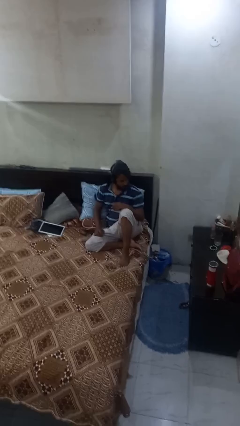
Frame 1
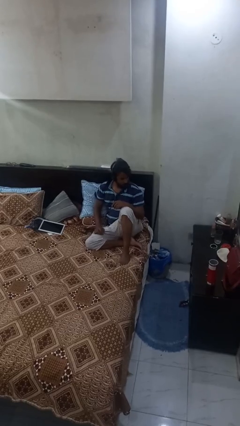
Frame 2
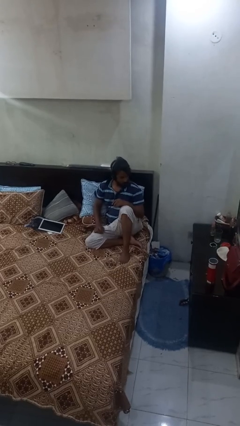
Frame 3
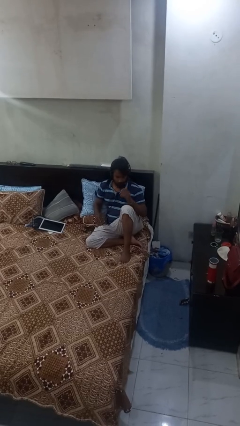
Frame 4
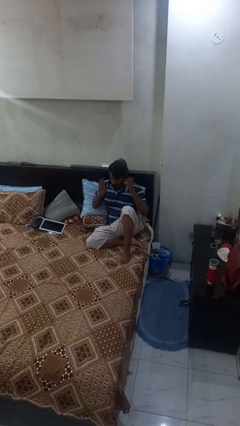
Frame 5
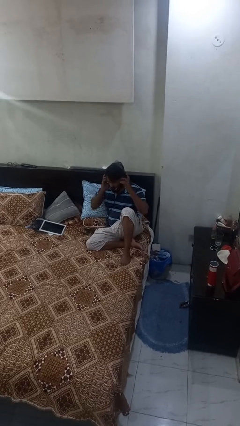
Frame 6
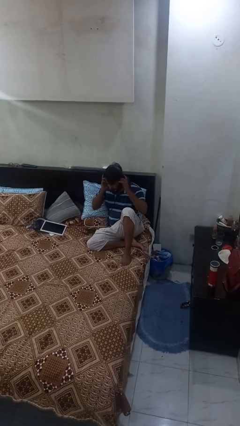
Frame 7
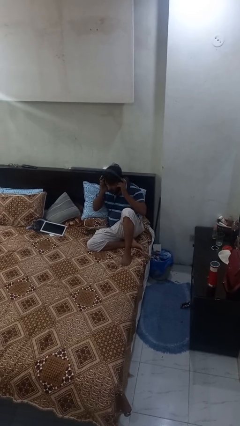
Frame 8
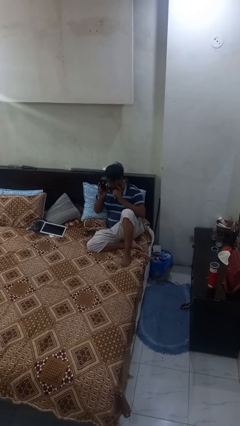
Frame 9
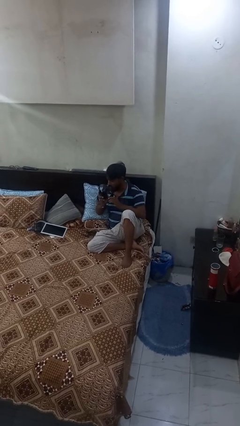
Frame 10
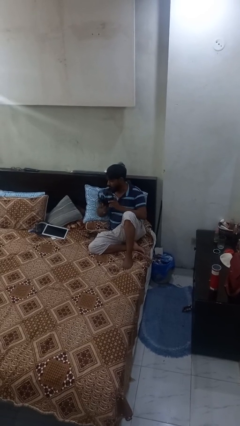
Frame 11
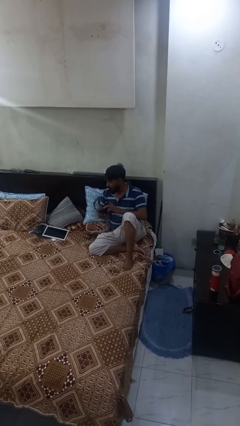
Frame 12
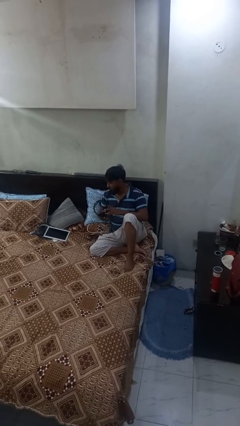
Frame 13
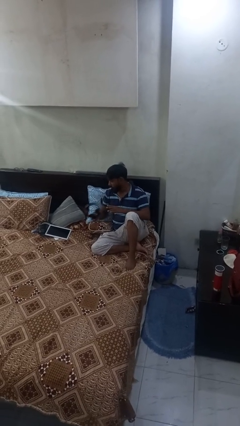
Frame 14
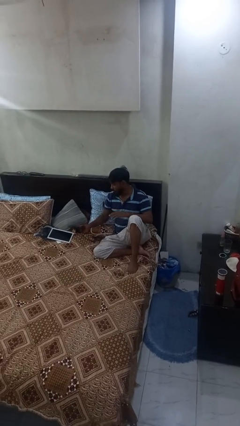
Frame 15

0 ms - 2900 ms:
person takes off headphones

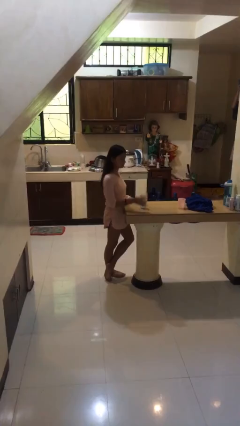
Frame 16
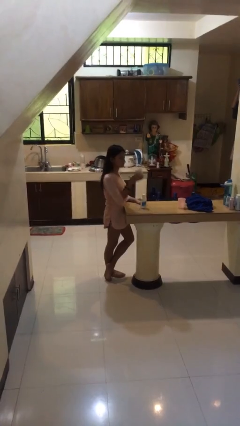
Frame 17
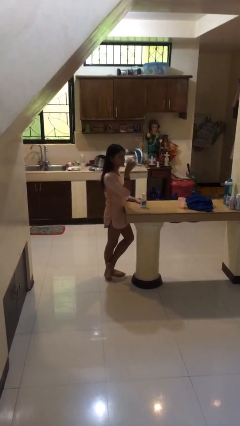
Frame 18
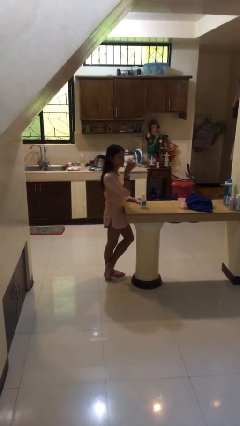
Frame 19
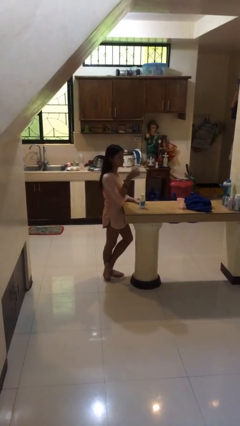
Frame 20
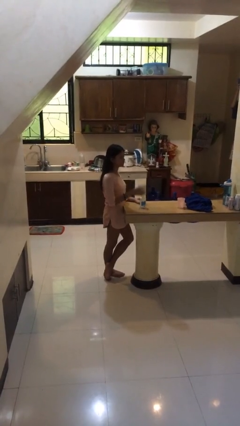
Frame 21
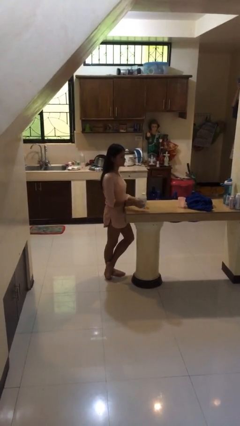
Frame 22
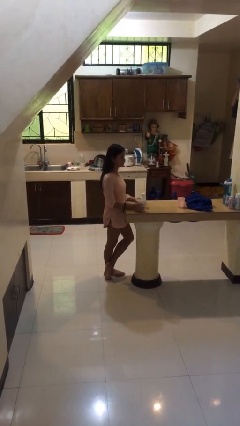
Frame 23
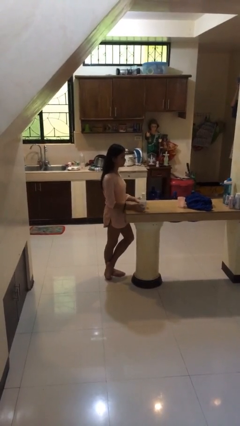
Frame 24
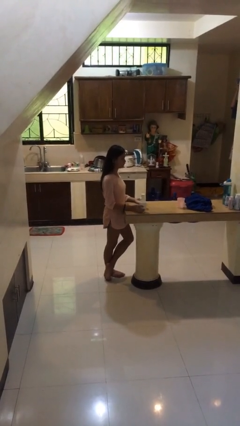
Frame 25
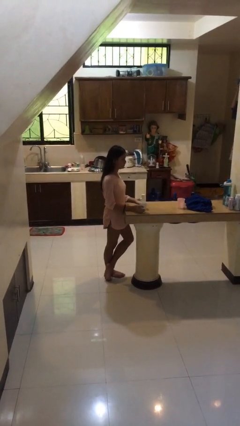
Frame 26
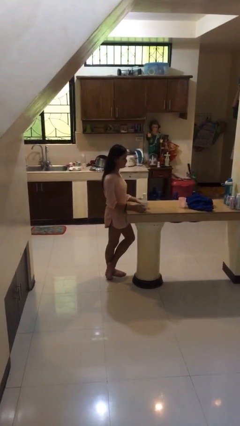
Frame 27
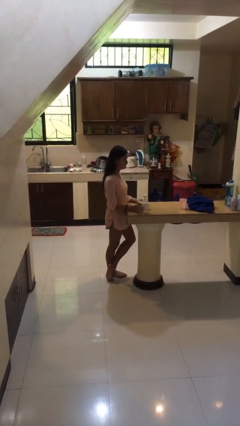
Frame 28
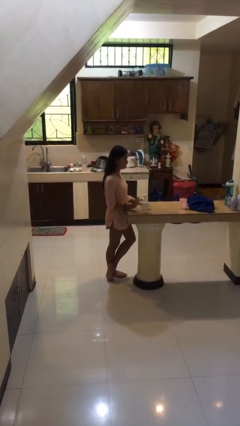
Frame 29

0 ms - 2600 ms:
person drinks from cup

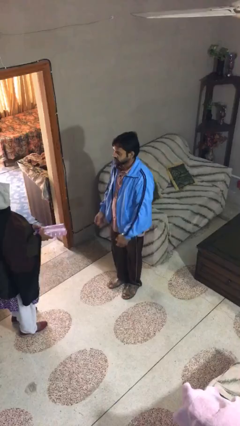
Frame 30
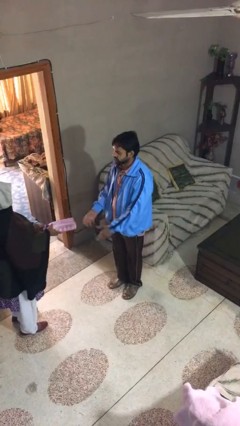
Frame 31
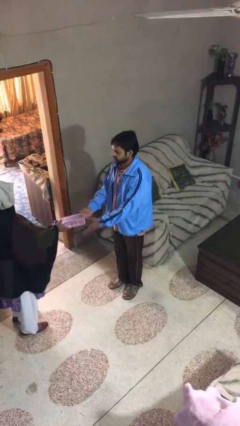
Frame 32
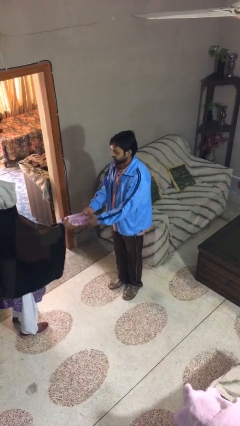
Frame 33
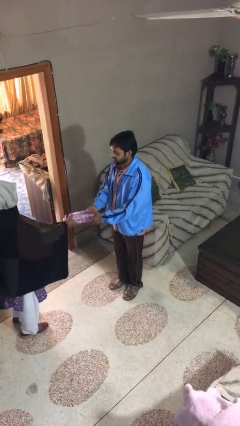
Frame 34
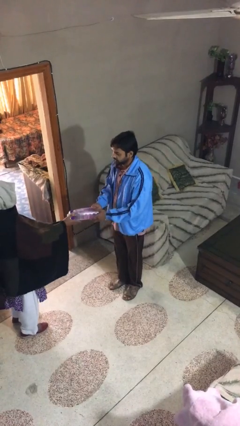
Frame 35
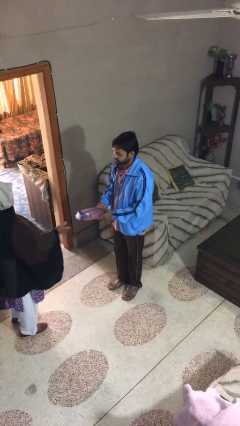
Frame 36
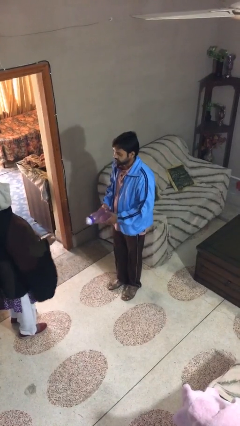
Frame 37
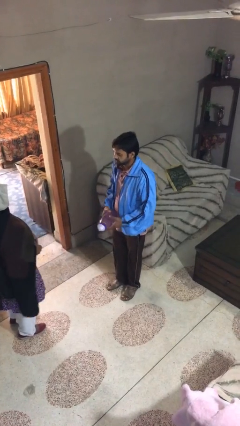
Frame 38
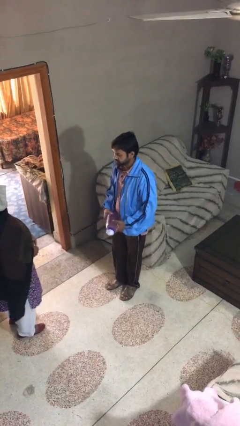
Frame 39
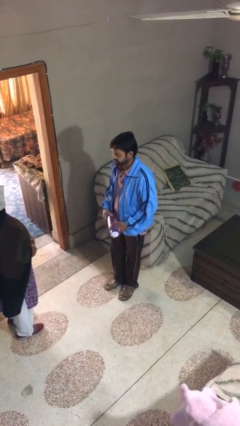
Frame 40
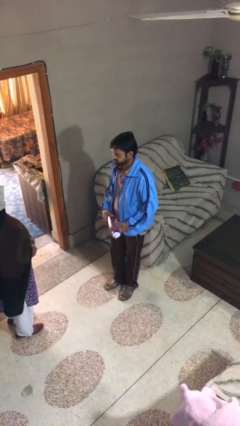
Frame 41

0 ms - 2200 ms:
person transfers object to person

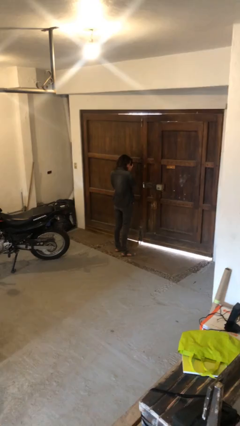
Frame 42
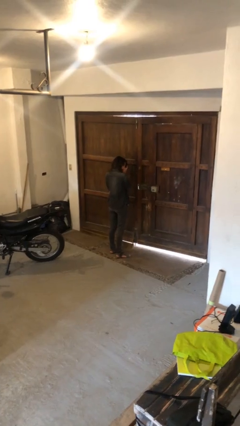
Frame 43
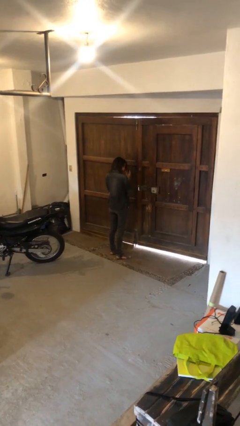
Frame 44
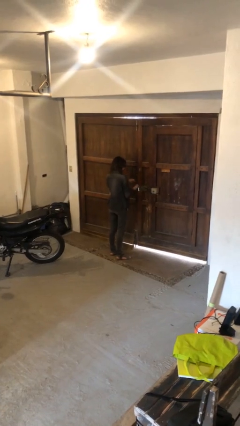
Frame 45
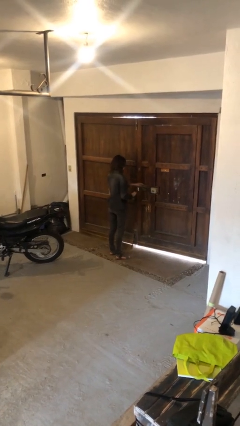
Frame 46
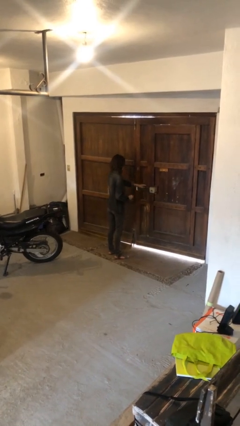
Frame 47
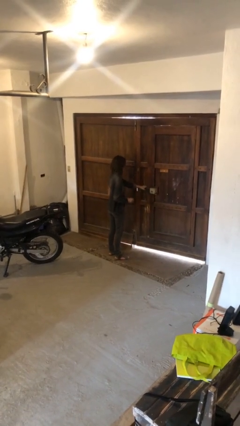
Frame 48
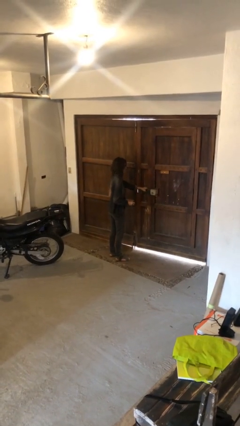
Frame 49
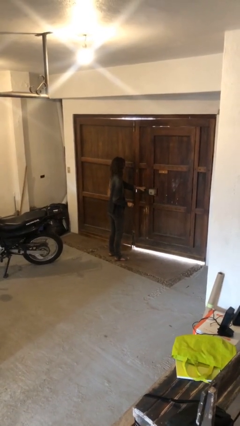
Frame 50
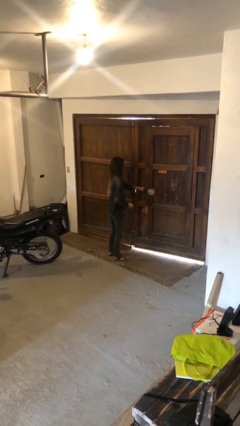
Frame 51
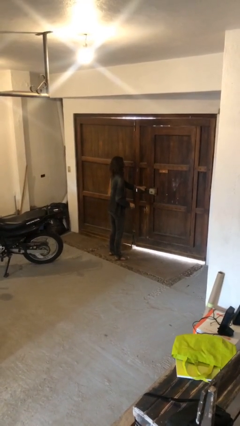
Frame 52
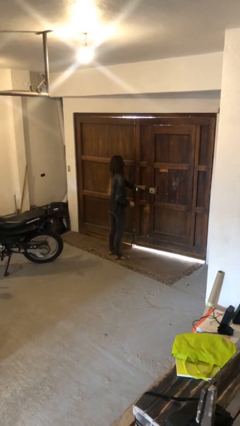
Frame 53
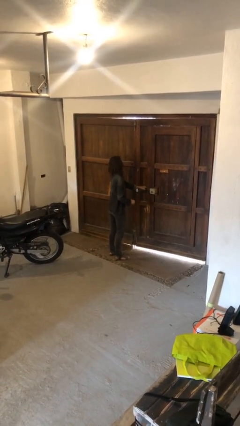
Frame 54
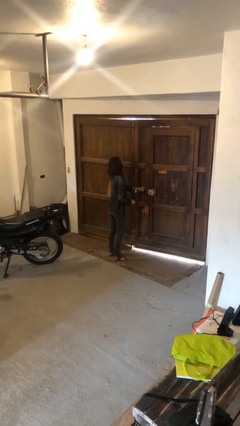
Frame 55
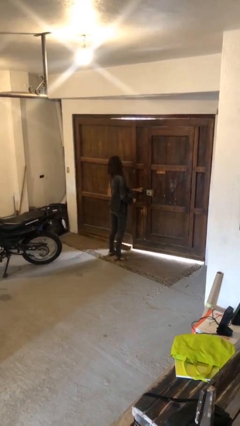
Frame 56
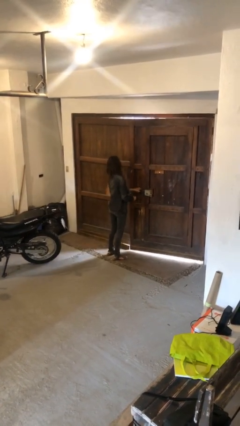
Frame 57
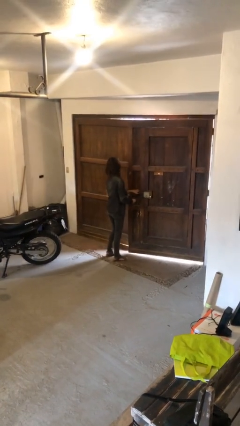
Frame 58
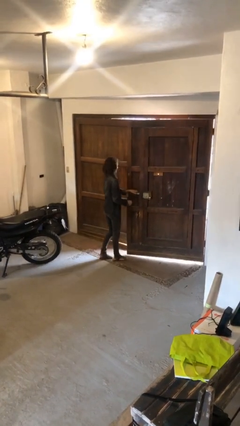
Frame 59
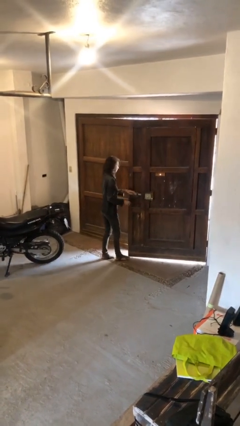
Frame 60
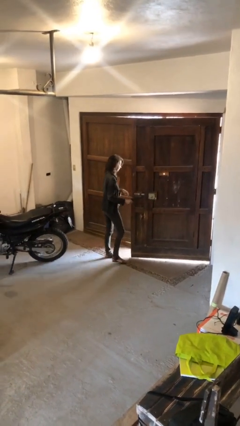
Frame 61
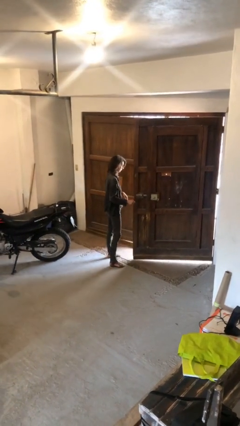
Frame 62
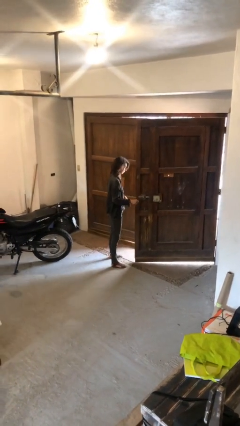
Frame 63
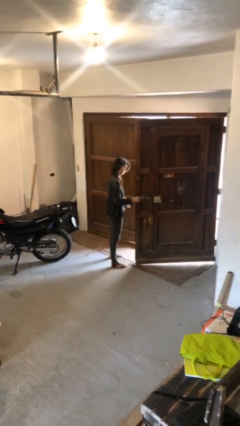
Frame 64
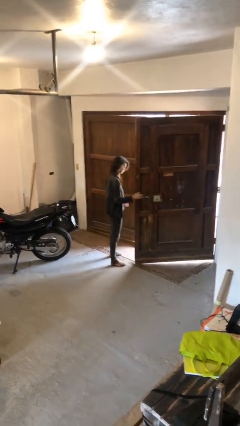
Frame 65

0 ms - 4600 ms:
person opens gate

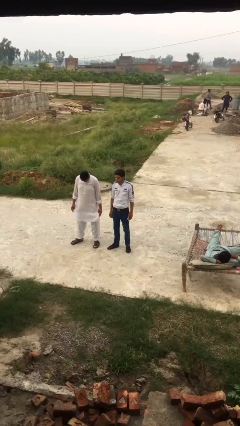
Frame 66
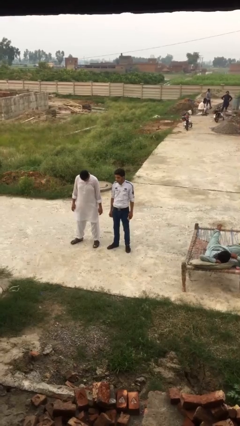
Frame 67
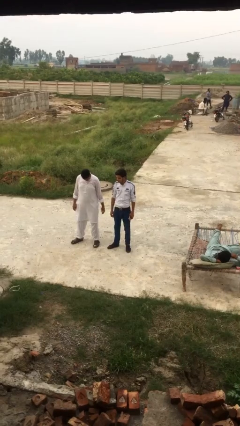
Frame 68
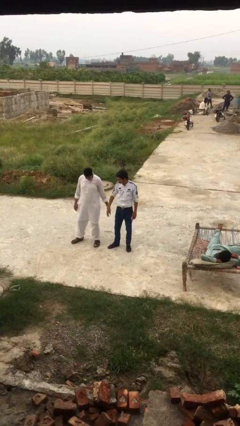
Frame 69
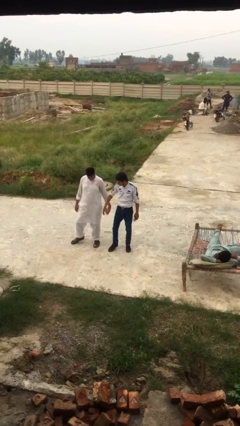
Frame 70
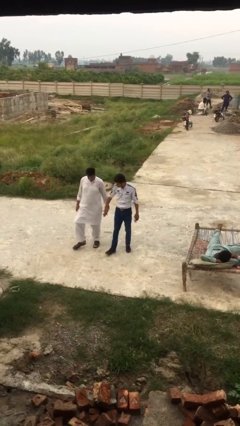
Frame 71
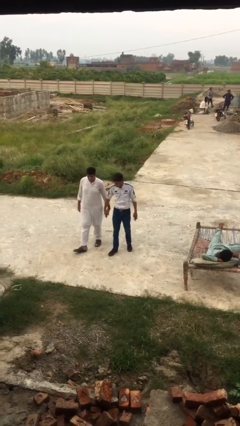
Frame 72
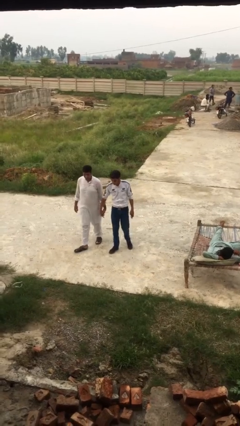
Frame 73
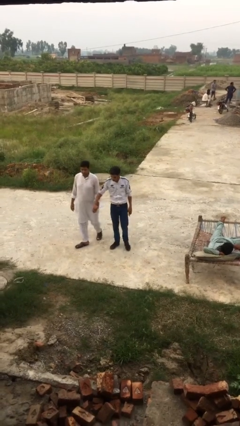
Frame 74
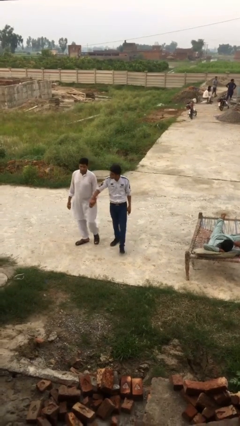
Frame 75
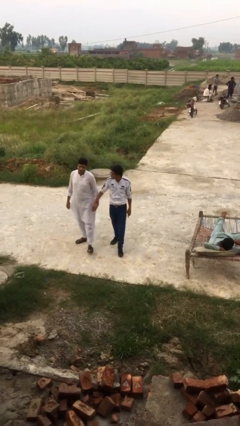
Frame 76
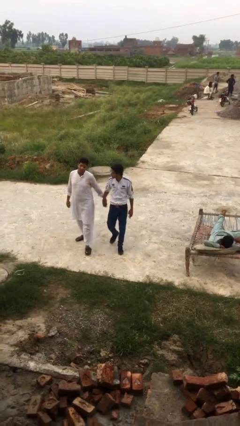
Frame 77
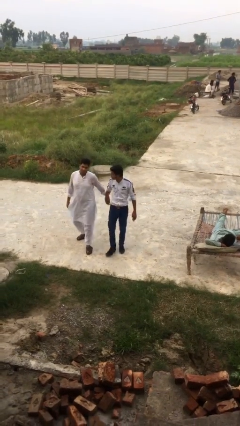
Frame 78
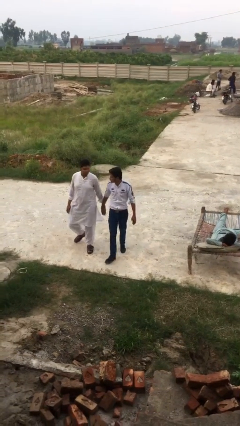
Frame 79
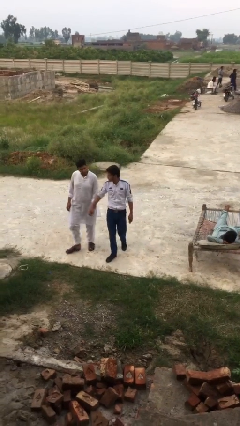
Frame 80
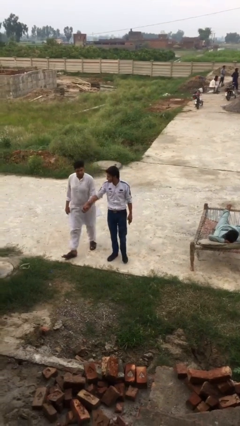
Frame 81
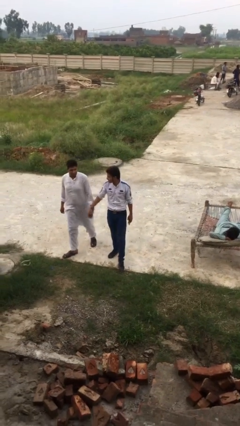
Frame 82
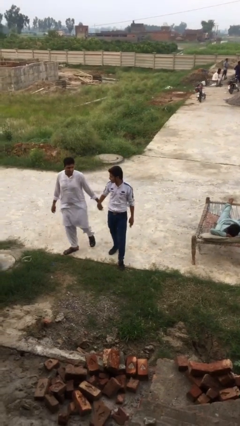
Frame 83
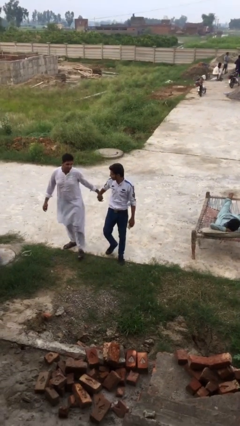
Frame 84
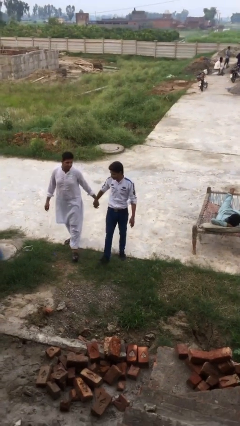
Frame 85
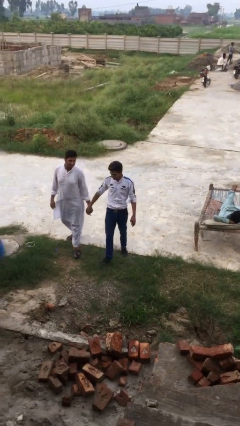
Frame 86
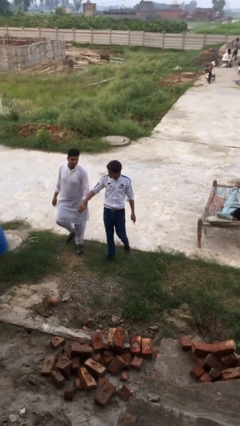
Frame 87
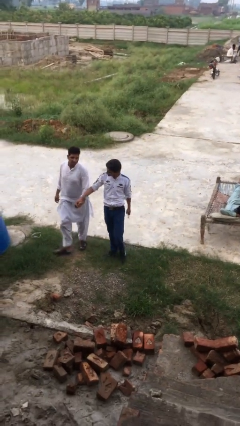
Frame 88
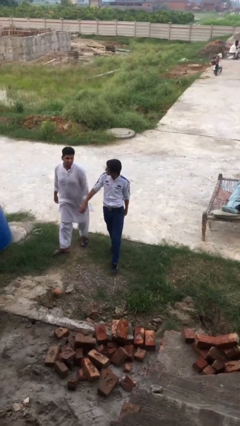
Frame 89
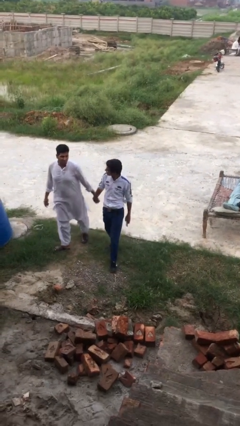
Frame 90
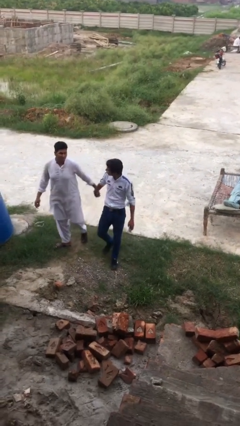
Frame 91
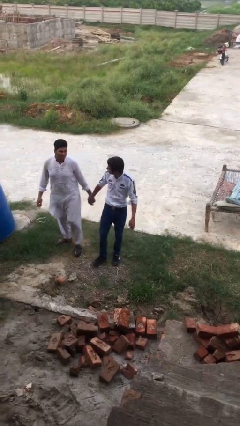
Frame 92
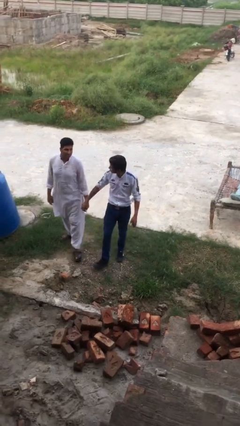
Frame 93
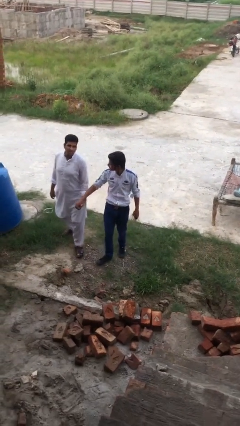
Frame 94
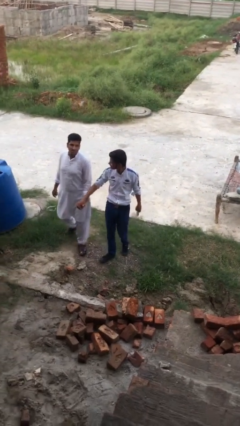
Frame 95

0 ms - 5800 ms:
person holds hand
